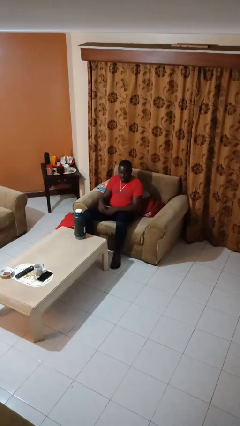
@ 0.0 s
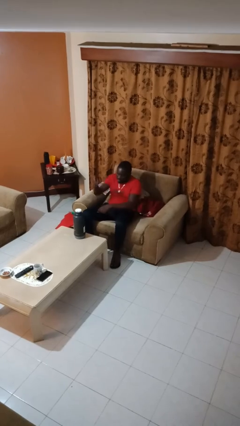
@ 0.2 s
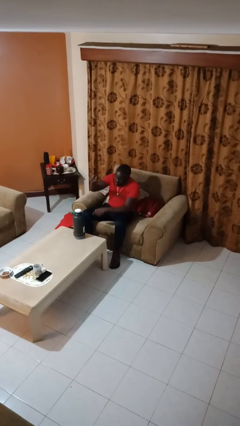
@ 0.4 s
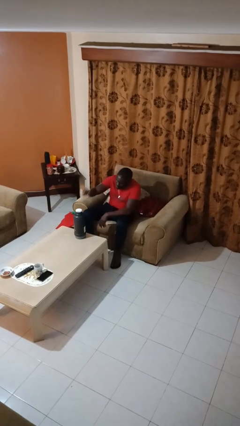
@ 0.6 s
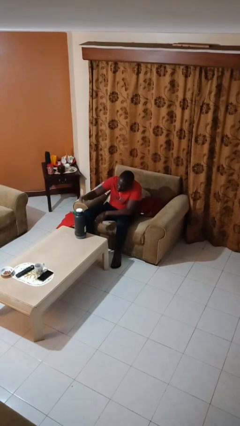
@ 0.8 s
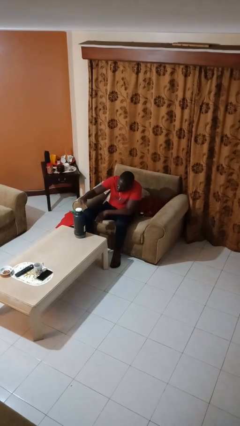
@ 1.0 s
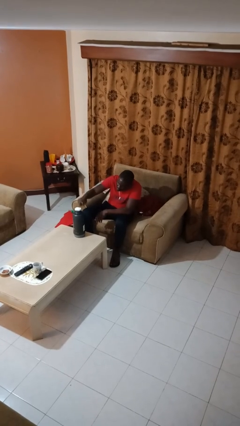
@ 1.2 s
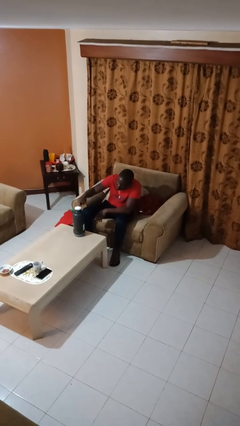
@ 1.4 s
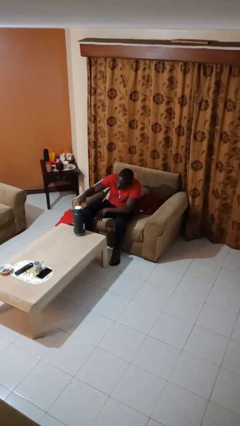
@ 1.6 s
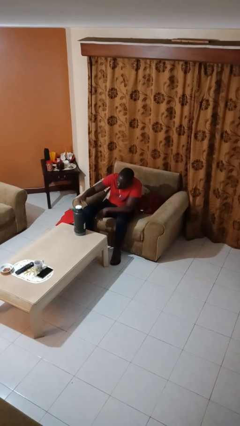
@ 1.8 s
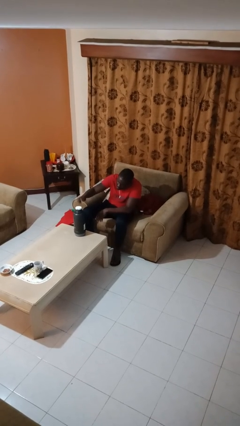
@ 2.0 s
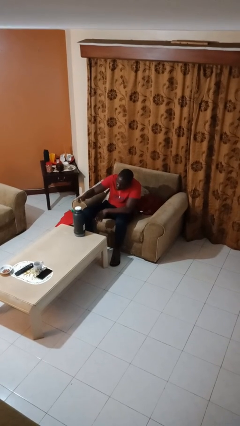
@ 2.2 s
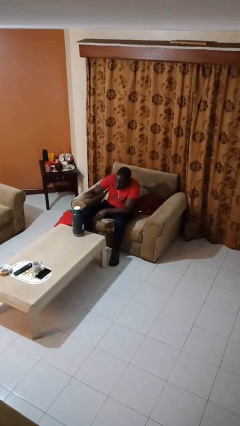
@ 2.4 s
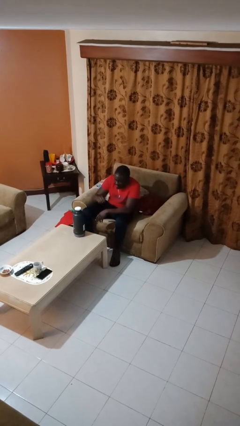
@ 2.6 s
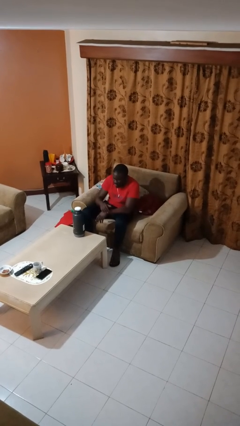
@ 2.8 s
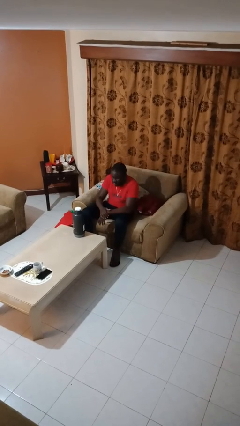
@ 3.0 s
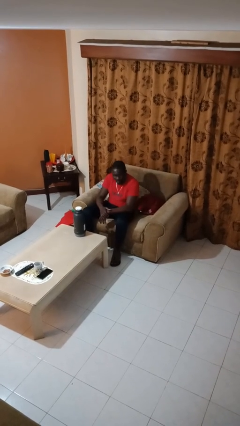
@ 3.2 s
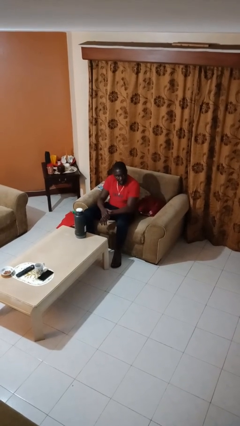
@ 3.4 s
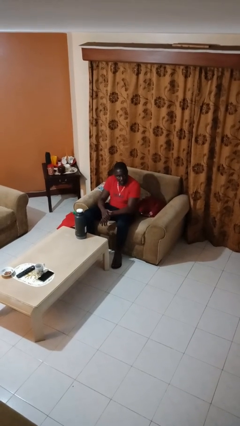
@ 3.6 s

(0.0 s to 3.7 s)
person taps object with finger

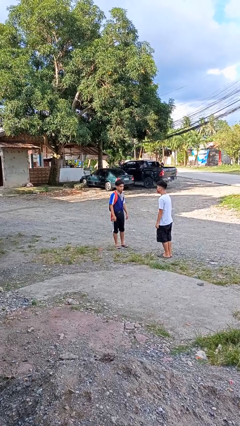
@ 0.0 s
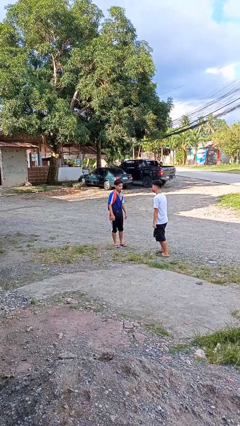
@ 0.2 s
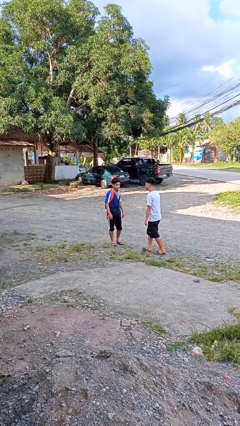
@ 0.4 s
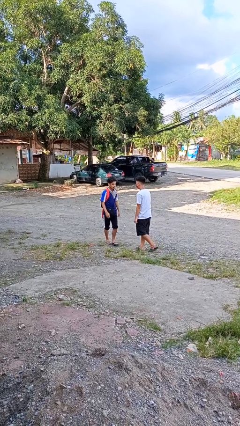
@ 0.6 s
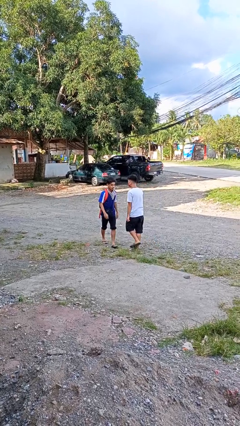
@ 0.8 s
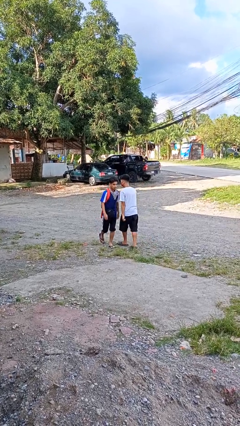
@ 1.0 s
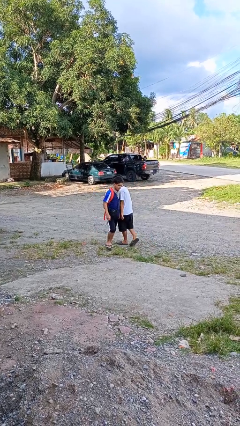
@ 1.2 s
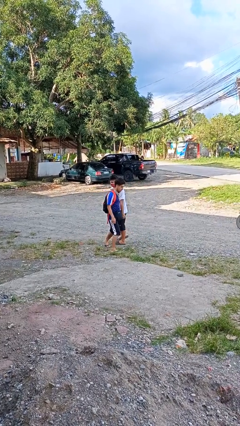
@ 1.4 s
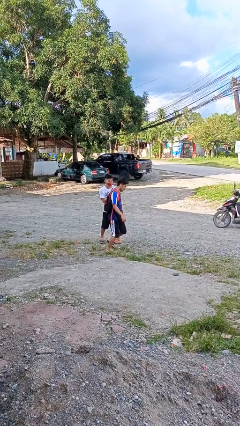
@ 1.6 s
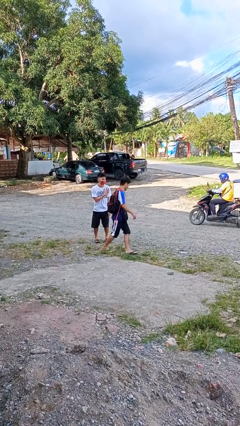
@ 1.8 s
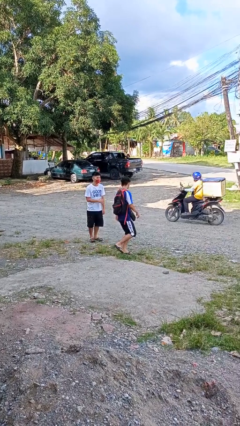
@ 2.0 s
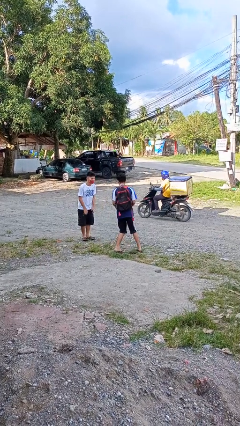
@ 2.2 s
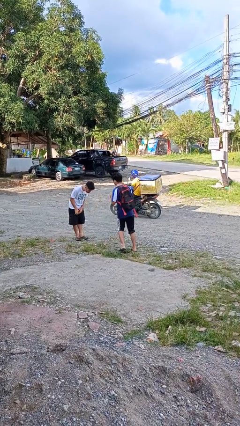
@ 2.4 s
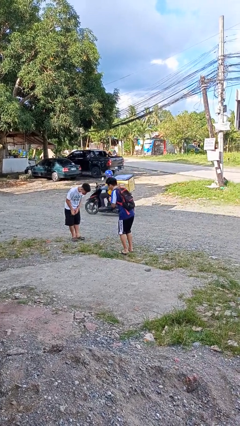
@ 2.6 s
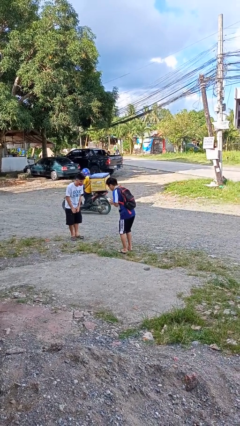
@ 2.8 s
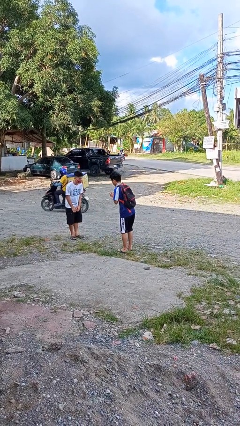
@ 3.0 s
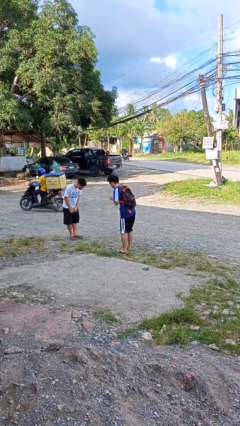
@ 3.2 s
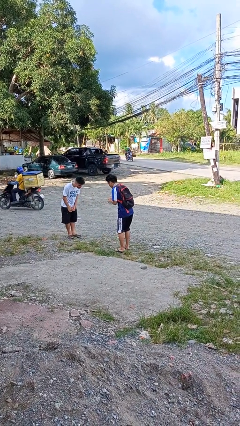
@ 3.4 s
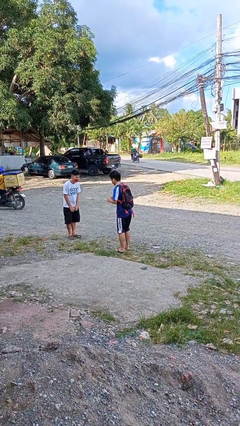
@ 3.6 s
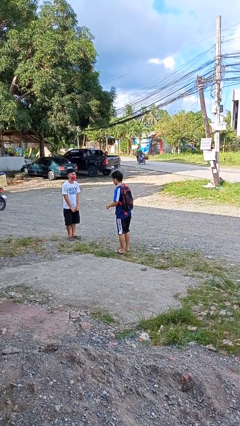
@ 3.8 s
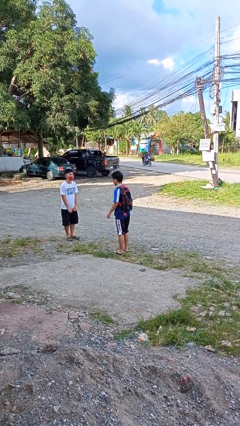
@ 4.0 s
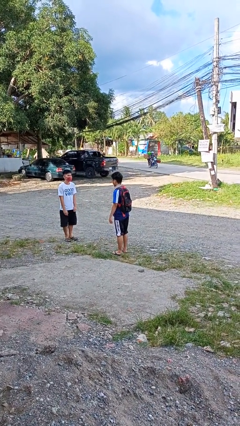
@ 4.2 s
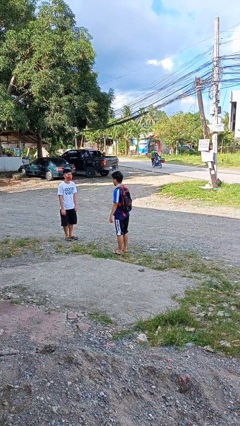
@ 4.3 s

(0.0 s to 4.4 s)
person bumps into person

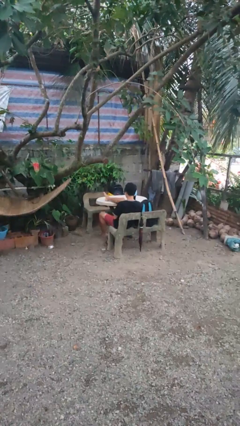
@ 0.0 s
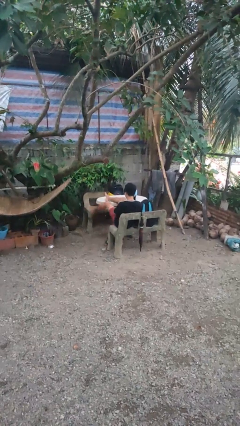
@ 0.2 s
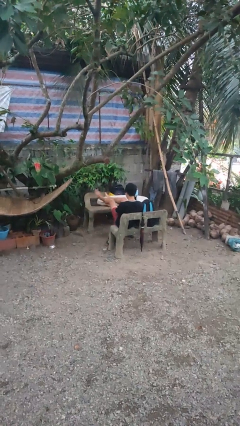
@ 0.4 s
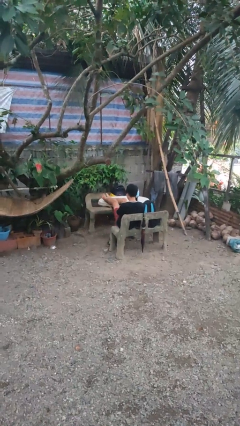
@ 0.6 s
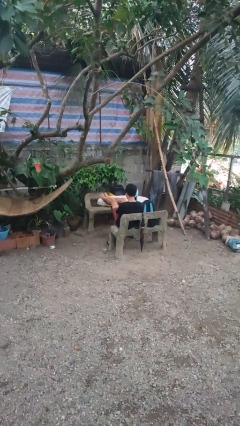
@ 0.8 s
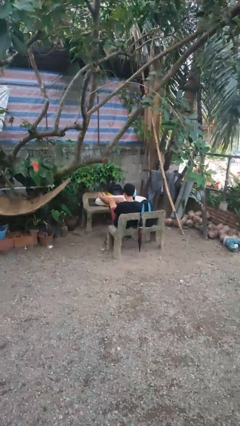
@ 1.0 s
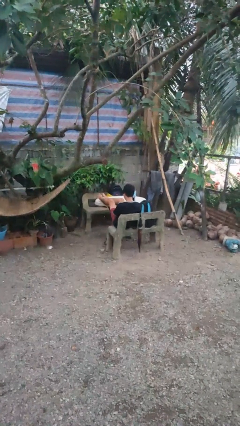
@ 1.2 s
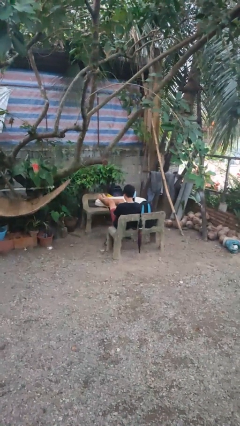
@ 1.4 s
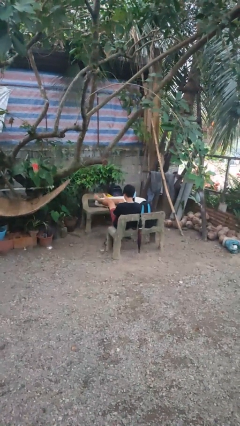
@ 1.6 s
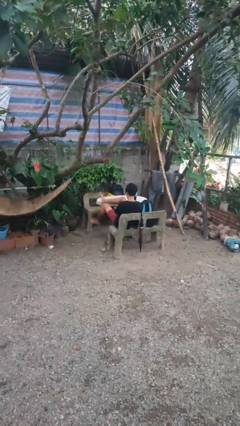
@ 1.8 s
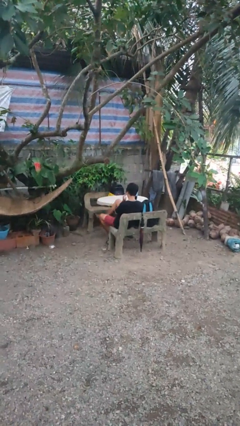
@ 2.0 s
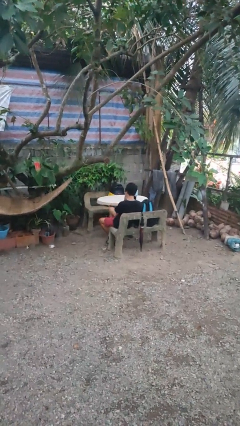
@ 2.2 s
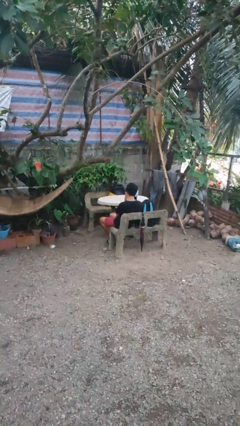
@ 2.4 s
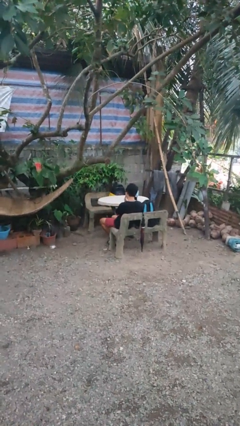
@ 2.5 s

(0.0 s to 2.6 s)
person puts feet up

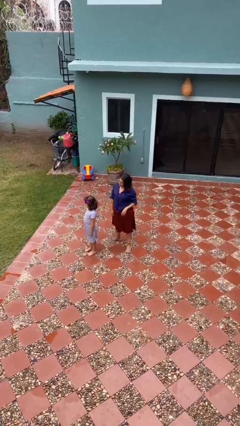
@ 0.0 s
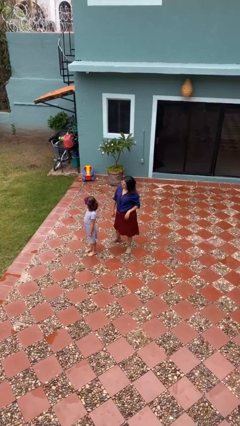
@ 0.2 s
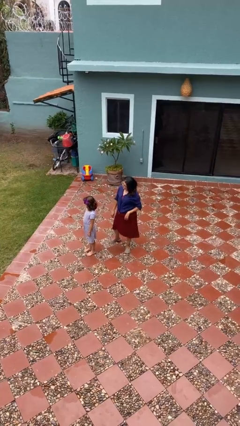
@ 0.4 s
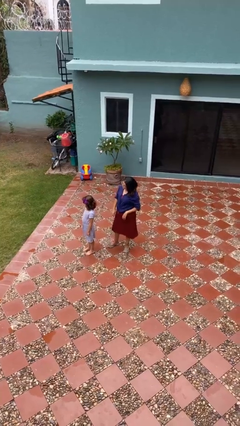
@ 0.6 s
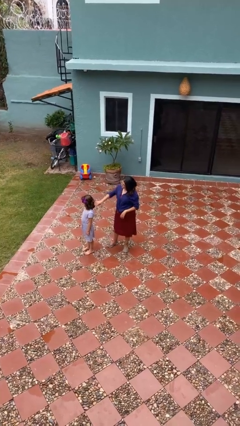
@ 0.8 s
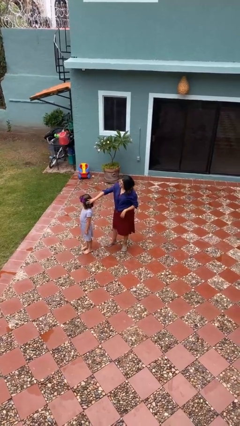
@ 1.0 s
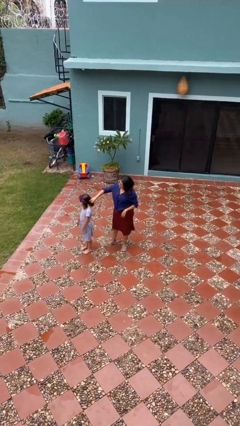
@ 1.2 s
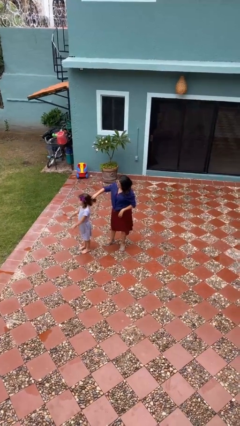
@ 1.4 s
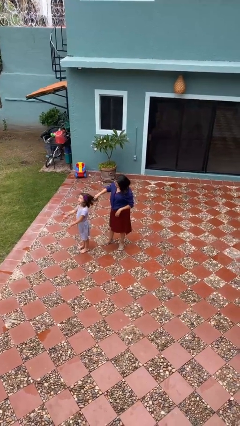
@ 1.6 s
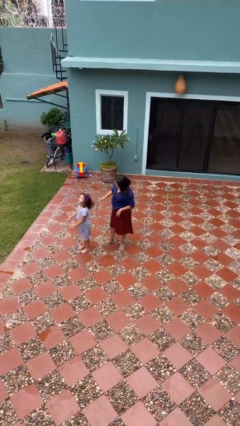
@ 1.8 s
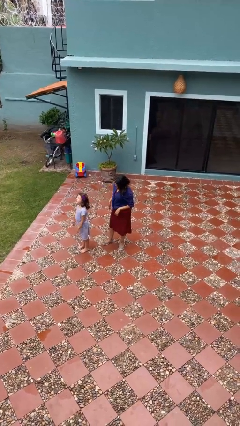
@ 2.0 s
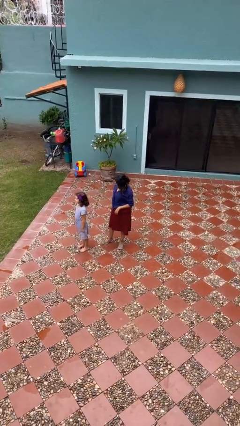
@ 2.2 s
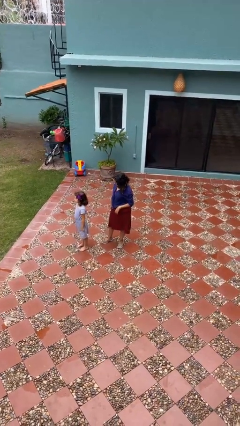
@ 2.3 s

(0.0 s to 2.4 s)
person grabs person by hair

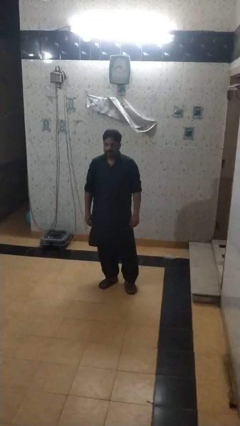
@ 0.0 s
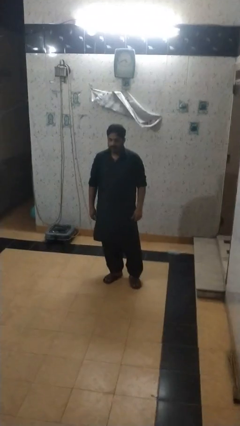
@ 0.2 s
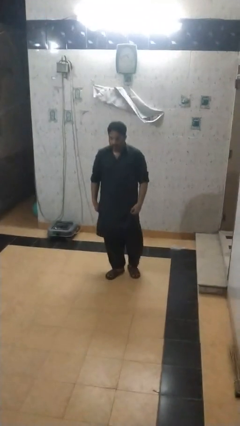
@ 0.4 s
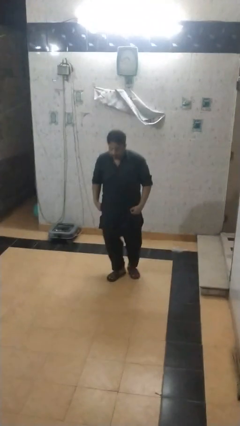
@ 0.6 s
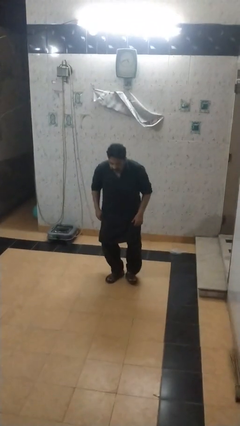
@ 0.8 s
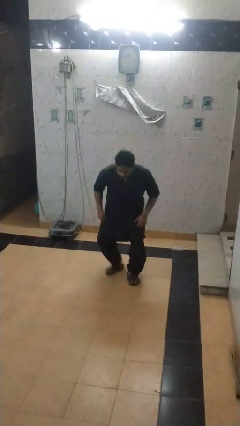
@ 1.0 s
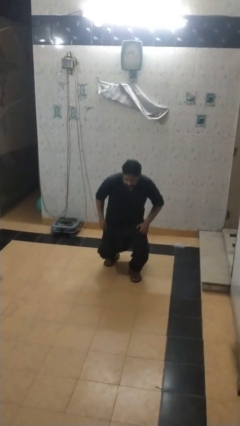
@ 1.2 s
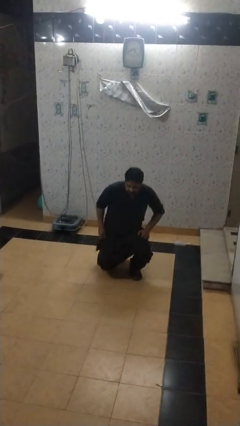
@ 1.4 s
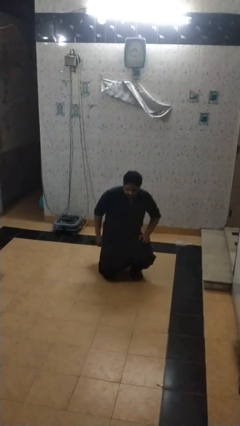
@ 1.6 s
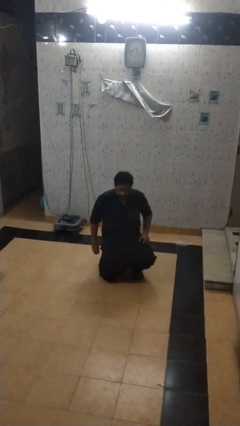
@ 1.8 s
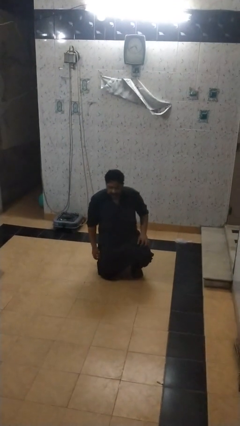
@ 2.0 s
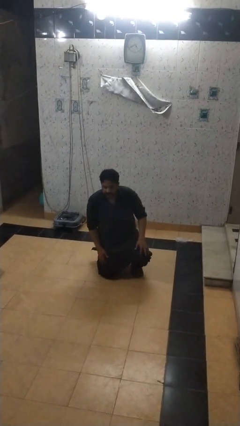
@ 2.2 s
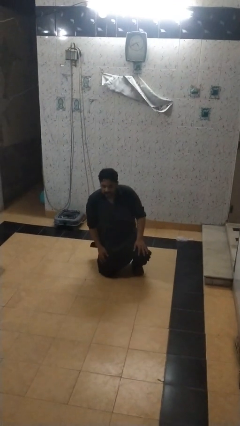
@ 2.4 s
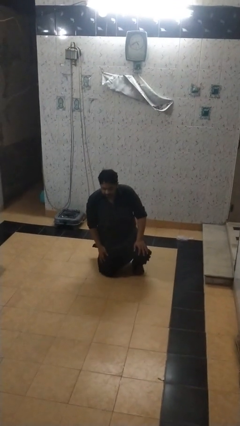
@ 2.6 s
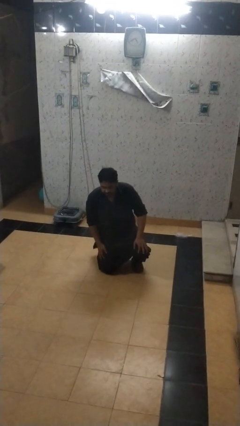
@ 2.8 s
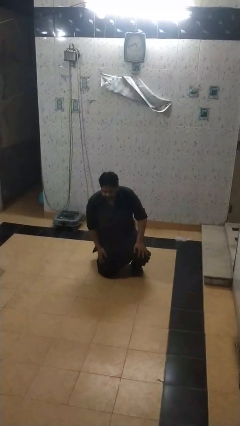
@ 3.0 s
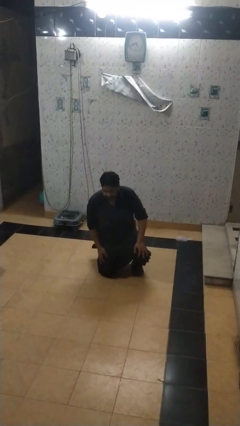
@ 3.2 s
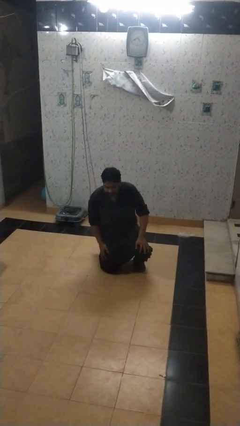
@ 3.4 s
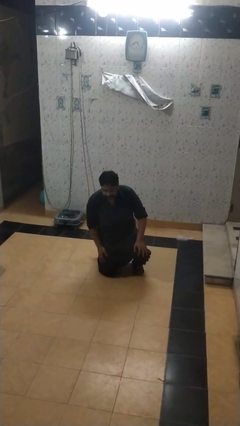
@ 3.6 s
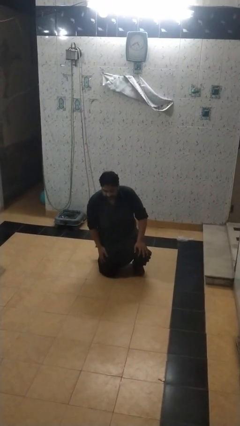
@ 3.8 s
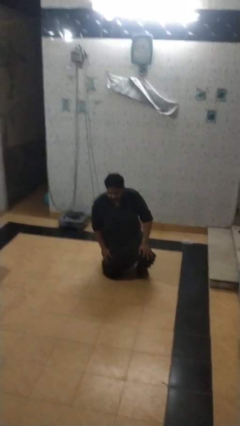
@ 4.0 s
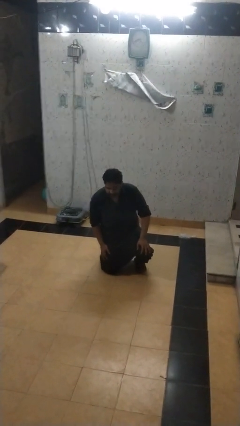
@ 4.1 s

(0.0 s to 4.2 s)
person kneels

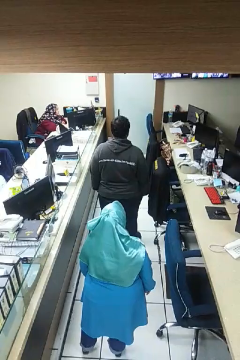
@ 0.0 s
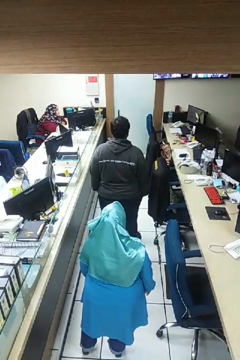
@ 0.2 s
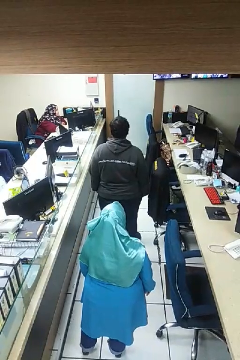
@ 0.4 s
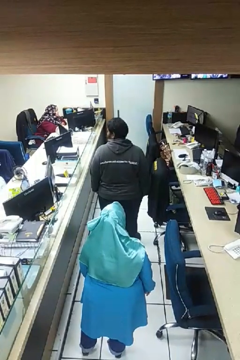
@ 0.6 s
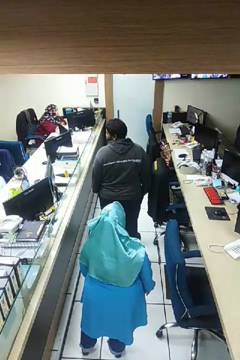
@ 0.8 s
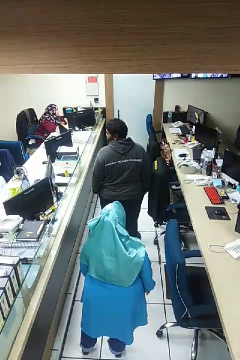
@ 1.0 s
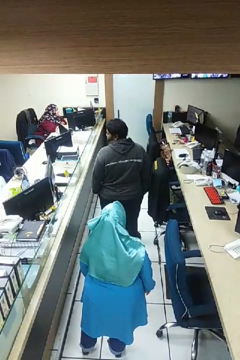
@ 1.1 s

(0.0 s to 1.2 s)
person looks over shoulder
